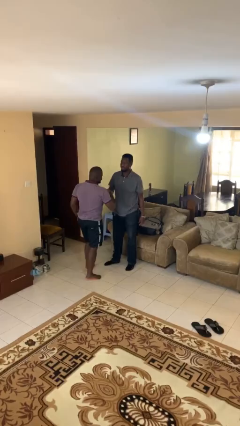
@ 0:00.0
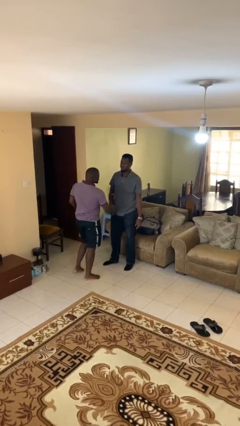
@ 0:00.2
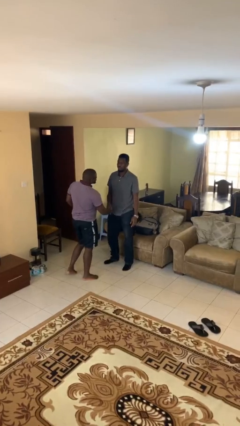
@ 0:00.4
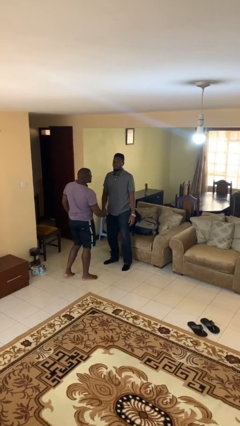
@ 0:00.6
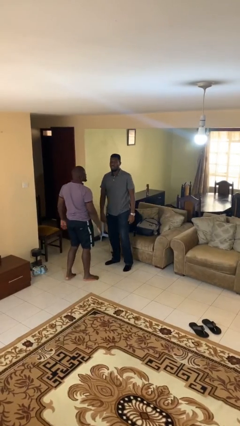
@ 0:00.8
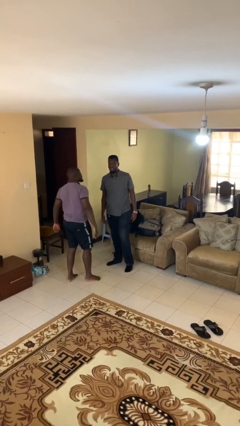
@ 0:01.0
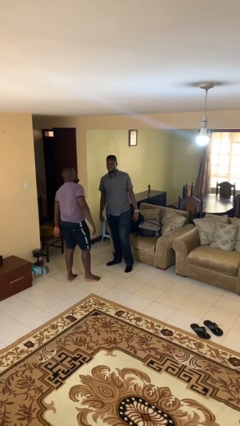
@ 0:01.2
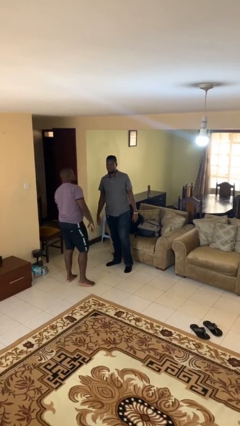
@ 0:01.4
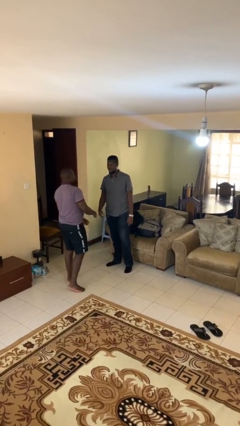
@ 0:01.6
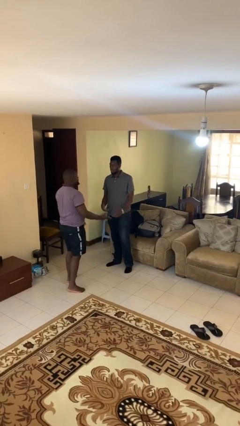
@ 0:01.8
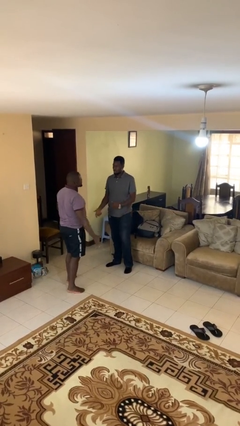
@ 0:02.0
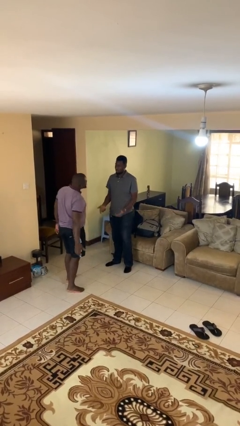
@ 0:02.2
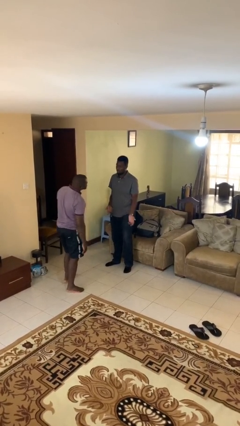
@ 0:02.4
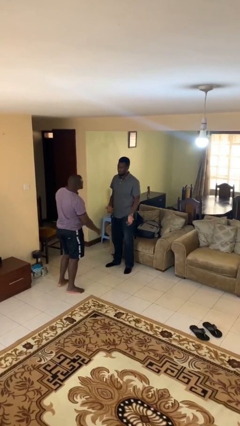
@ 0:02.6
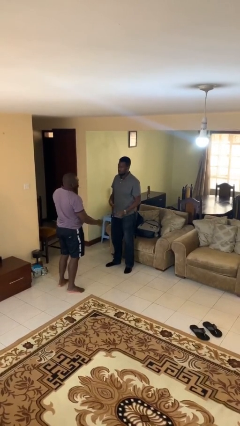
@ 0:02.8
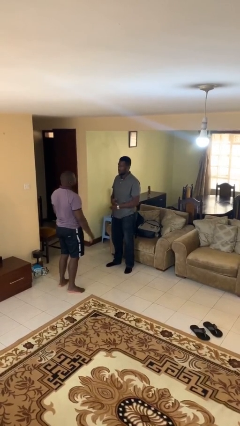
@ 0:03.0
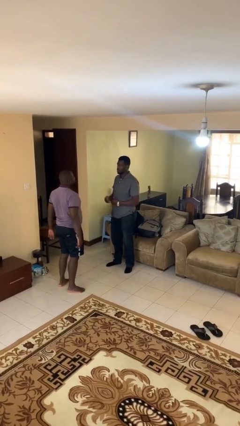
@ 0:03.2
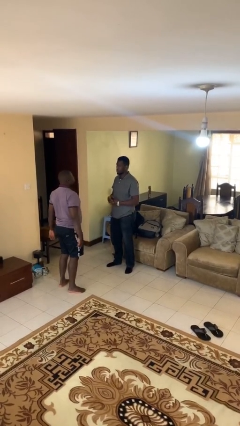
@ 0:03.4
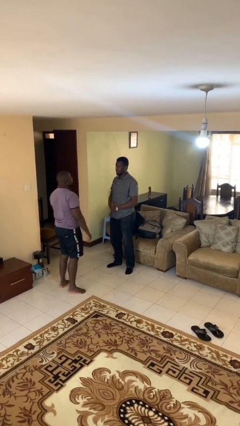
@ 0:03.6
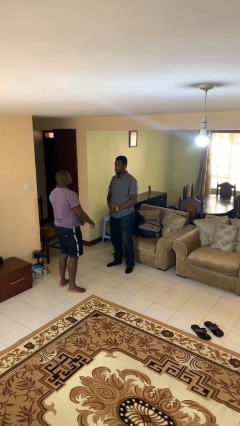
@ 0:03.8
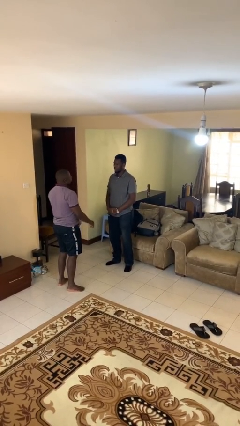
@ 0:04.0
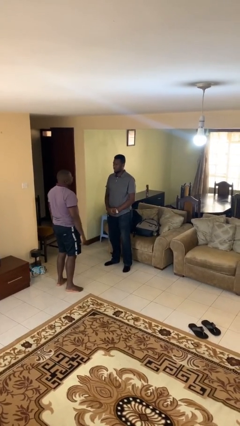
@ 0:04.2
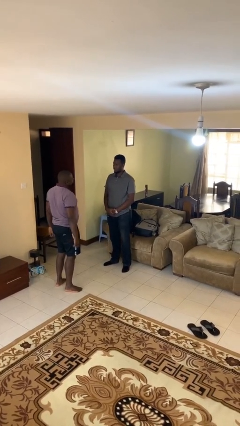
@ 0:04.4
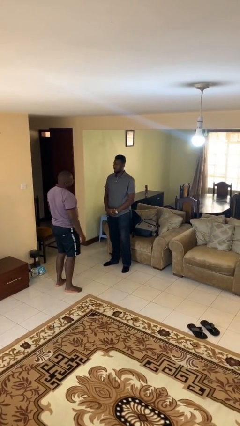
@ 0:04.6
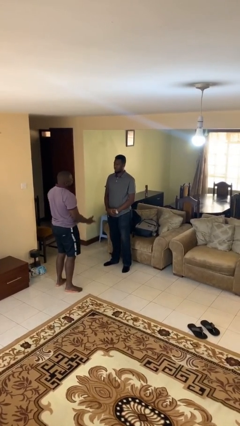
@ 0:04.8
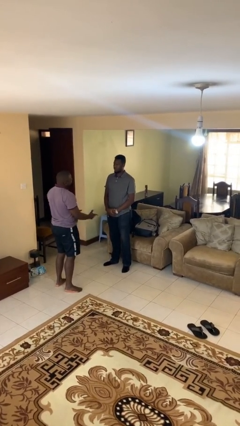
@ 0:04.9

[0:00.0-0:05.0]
person talks to person

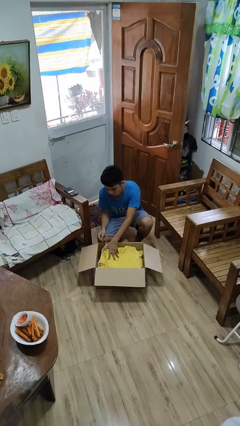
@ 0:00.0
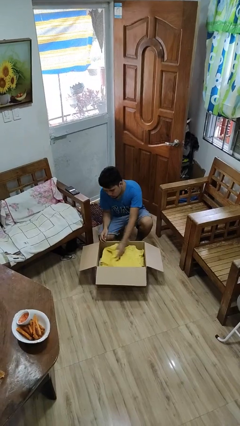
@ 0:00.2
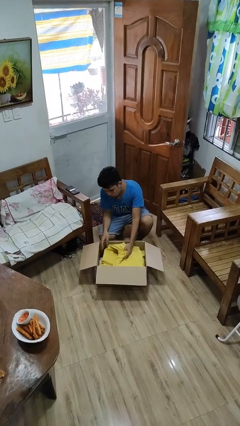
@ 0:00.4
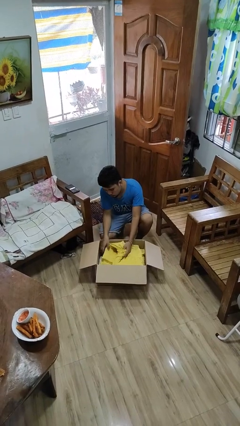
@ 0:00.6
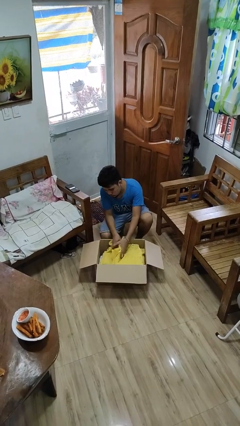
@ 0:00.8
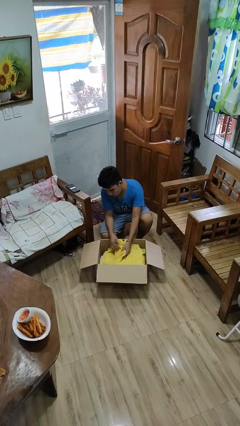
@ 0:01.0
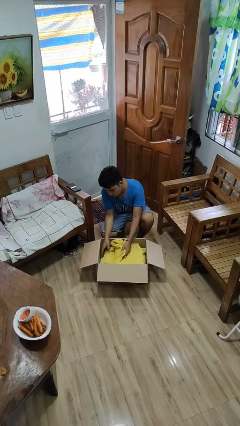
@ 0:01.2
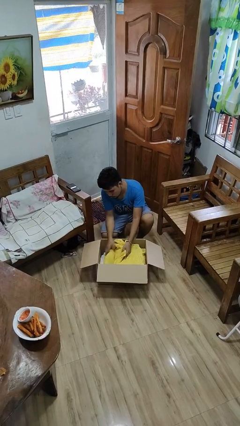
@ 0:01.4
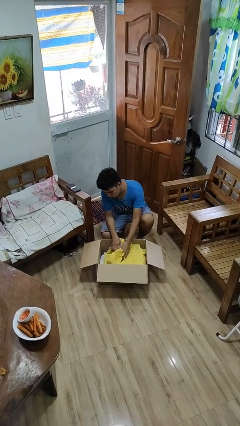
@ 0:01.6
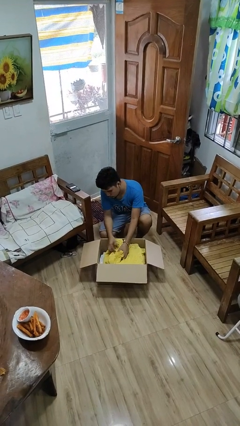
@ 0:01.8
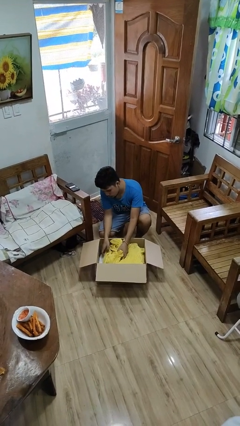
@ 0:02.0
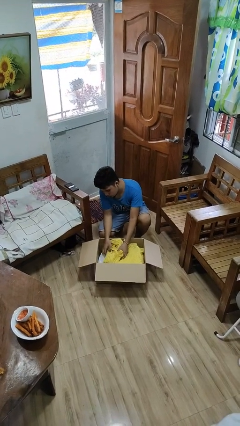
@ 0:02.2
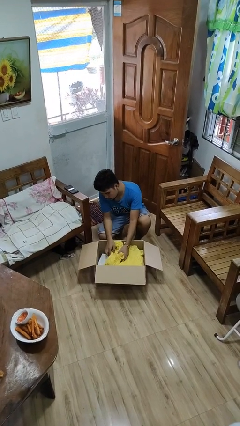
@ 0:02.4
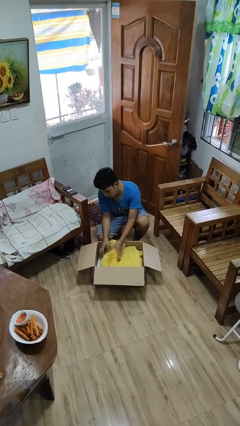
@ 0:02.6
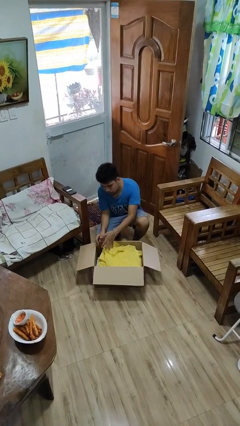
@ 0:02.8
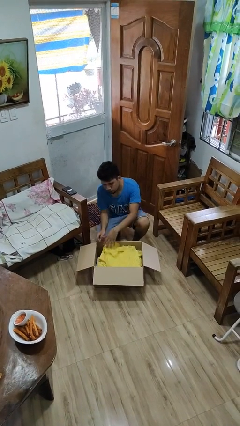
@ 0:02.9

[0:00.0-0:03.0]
person searches in box

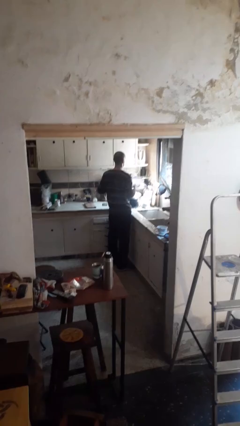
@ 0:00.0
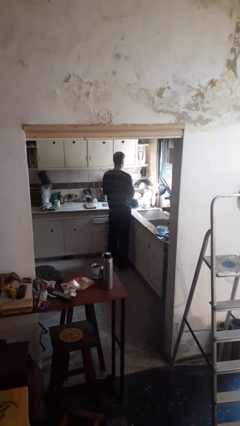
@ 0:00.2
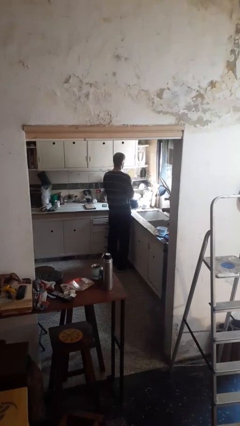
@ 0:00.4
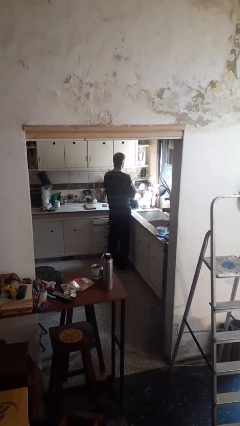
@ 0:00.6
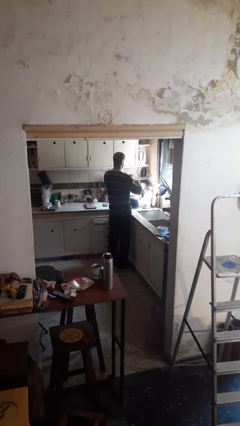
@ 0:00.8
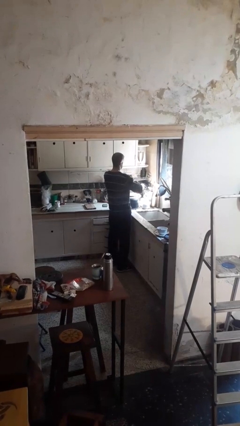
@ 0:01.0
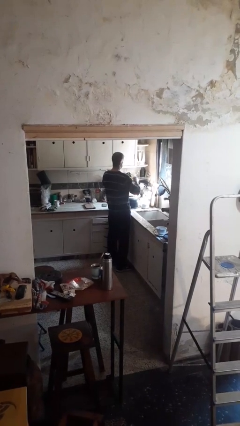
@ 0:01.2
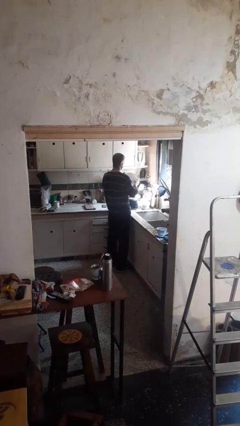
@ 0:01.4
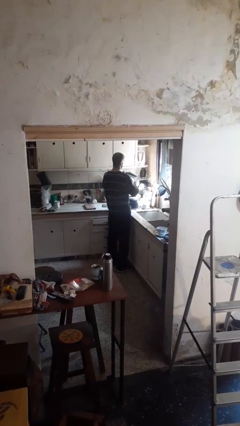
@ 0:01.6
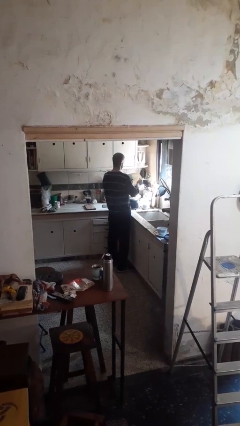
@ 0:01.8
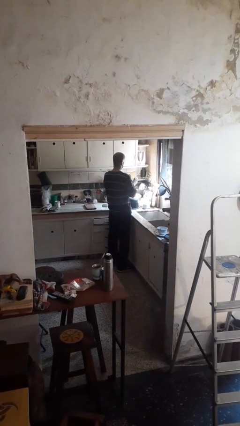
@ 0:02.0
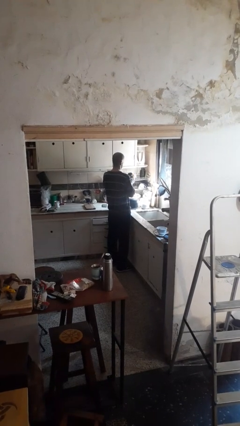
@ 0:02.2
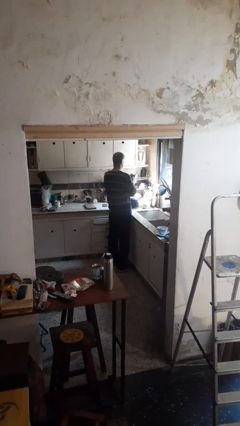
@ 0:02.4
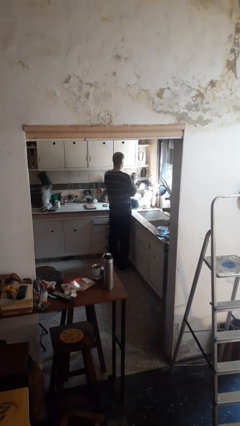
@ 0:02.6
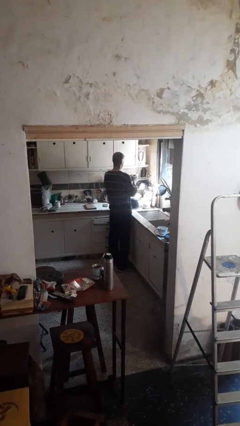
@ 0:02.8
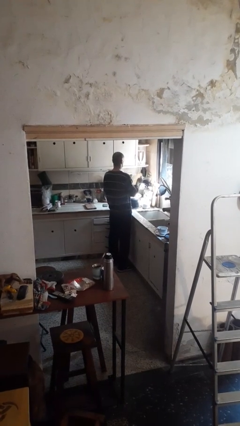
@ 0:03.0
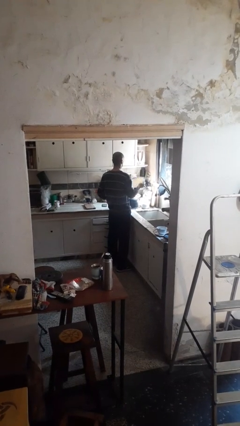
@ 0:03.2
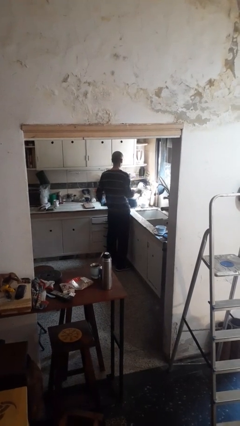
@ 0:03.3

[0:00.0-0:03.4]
person dries dish

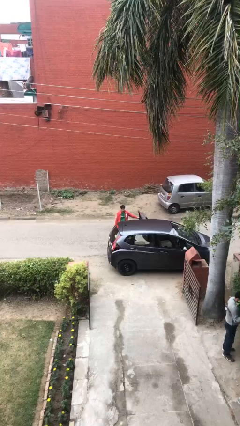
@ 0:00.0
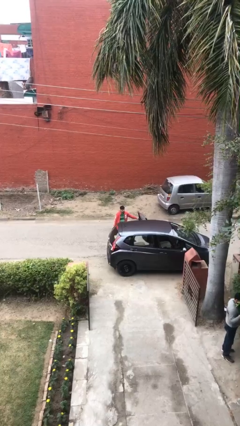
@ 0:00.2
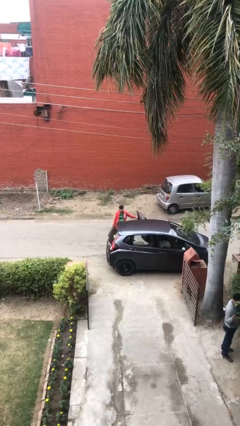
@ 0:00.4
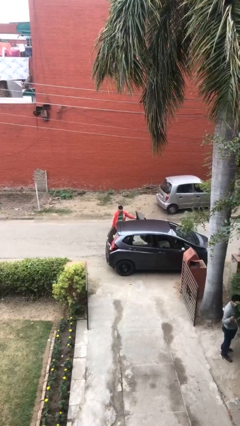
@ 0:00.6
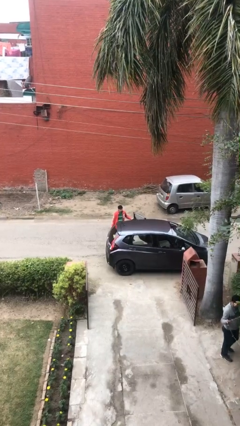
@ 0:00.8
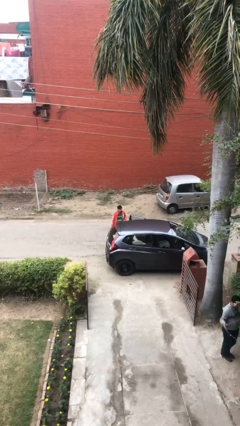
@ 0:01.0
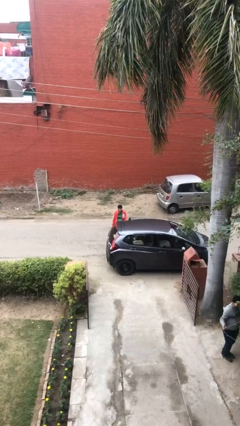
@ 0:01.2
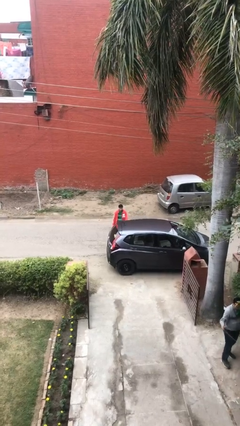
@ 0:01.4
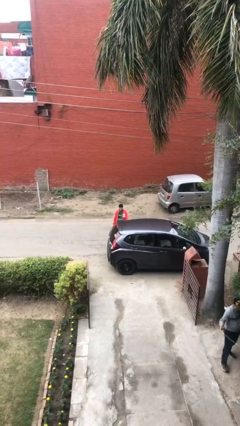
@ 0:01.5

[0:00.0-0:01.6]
person closes car door

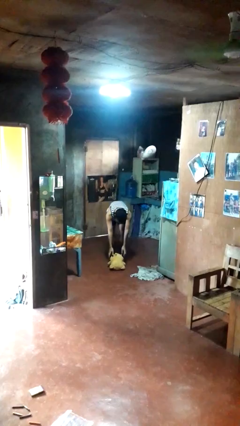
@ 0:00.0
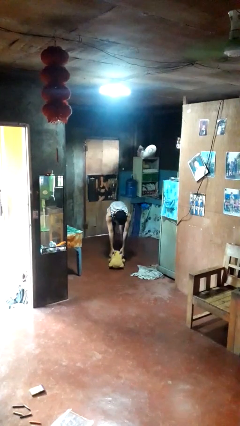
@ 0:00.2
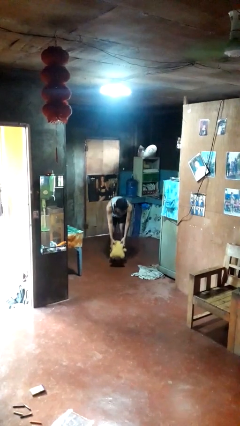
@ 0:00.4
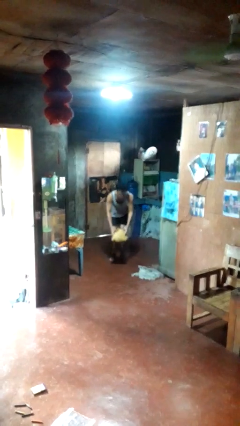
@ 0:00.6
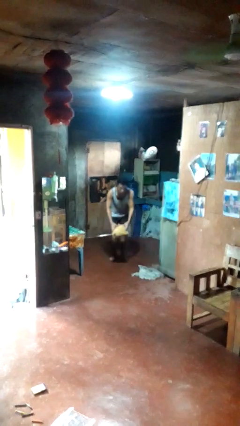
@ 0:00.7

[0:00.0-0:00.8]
person picks up object from floor

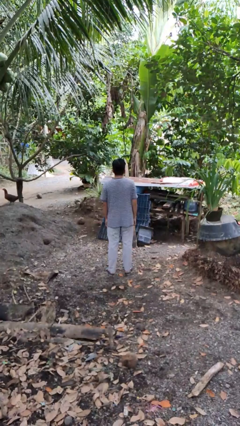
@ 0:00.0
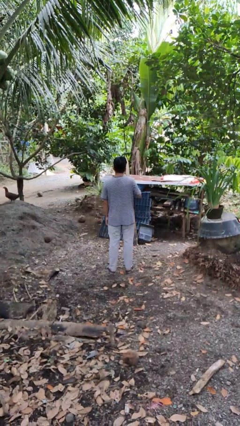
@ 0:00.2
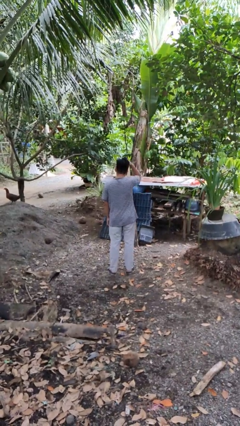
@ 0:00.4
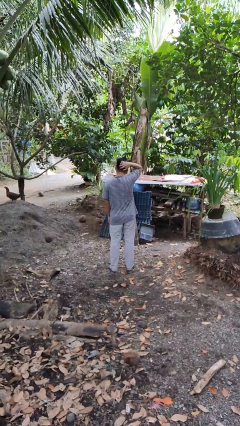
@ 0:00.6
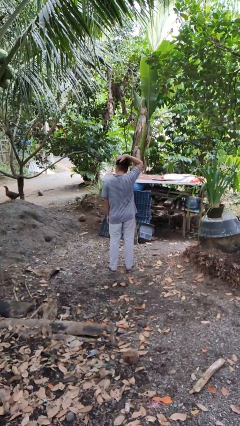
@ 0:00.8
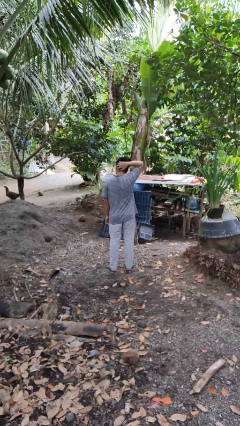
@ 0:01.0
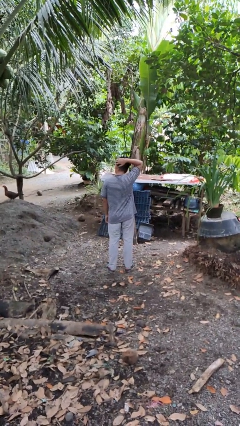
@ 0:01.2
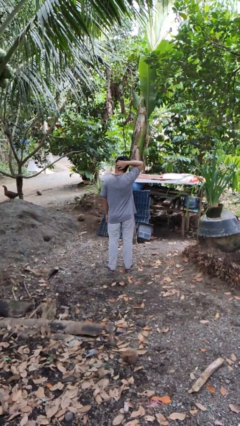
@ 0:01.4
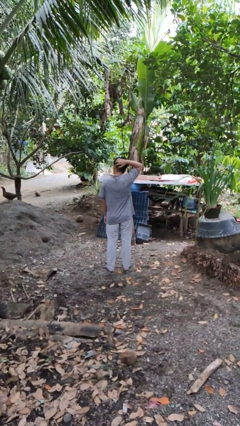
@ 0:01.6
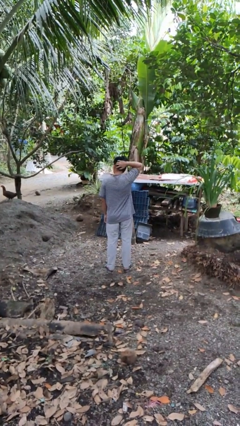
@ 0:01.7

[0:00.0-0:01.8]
person scratches face

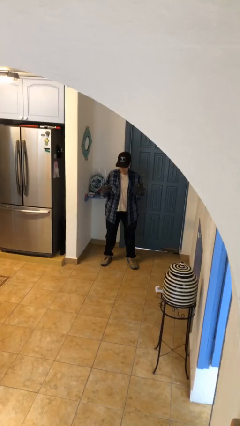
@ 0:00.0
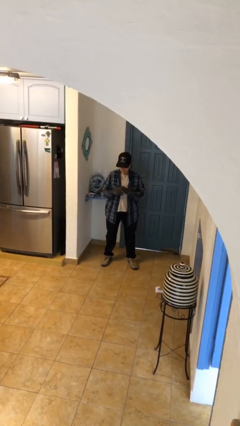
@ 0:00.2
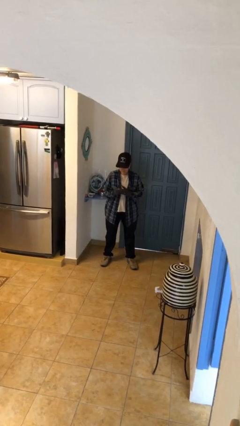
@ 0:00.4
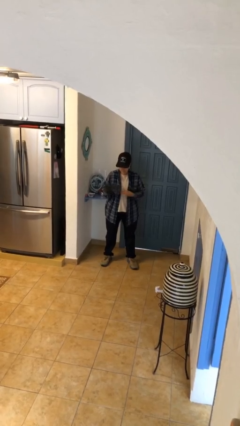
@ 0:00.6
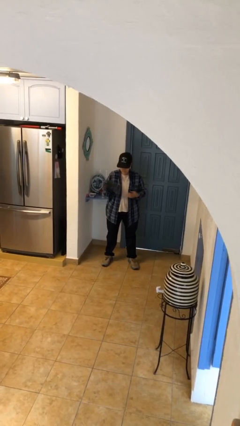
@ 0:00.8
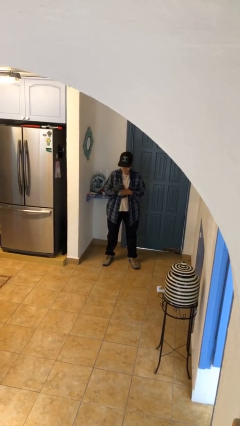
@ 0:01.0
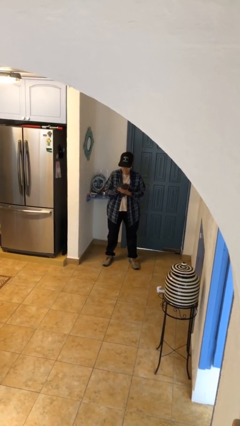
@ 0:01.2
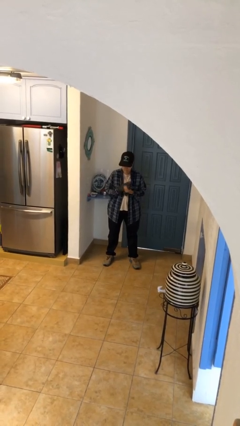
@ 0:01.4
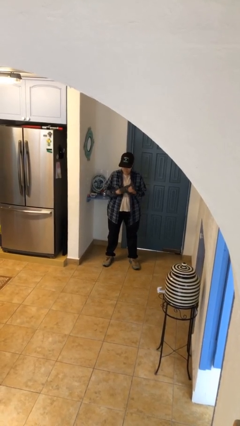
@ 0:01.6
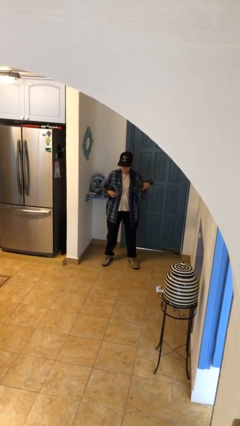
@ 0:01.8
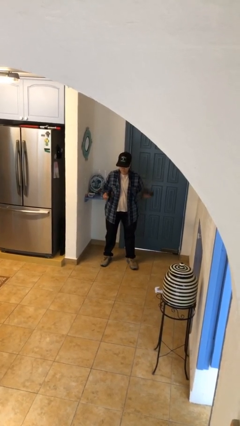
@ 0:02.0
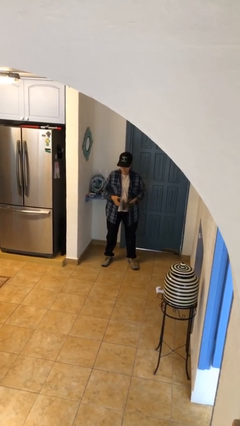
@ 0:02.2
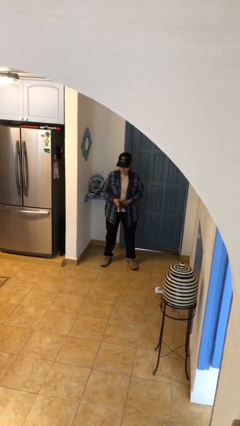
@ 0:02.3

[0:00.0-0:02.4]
person takes off gloves
